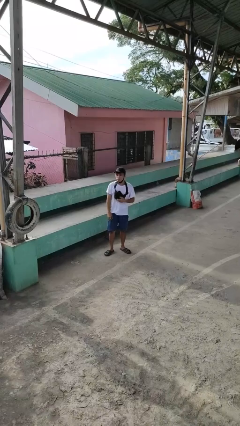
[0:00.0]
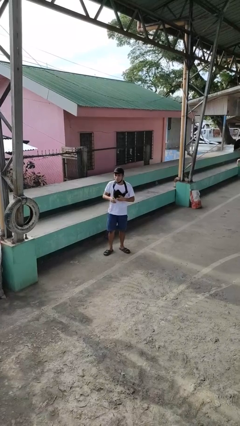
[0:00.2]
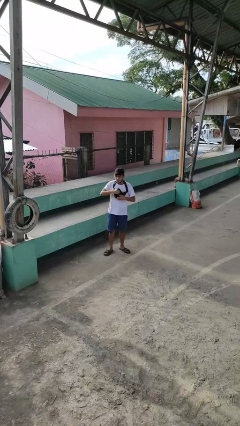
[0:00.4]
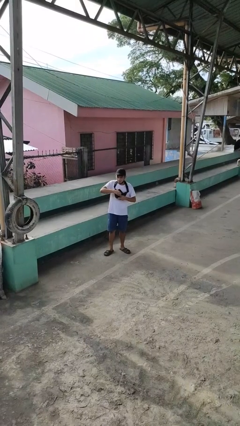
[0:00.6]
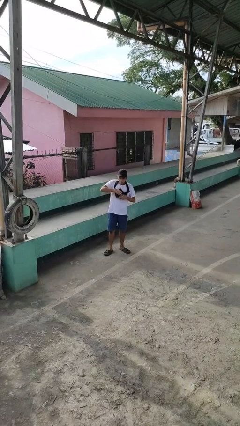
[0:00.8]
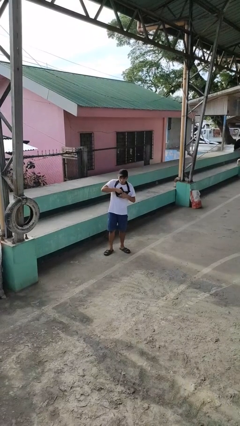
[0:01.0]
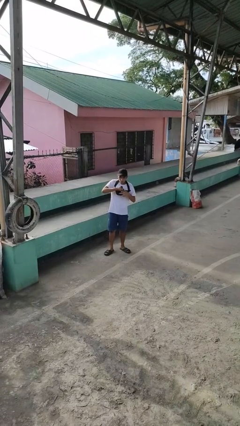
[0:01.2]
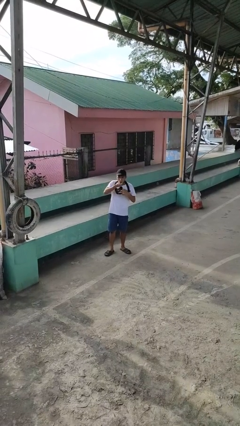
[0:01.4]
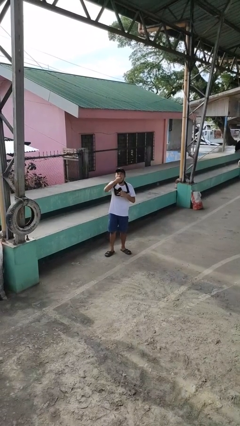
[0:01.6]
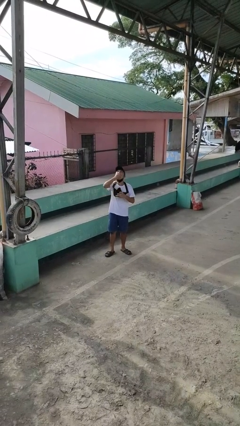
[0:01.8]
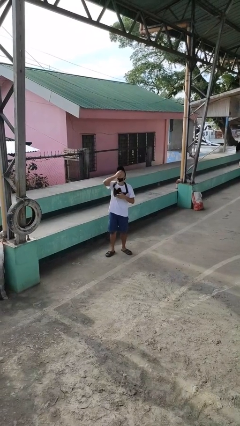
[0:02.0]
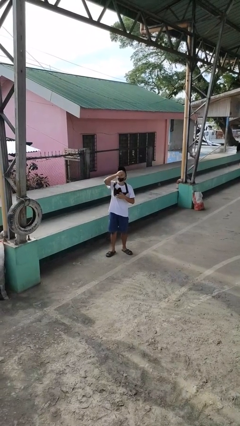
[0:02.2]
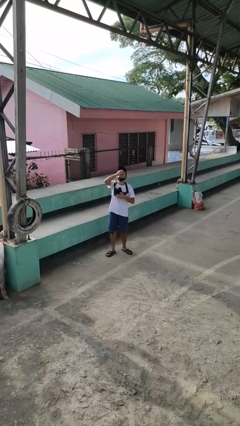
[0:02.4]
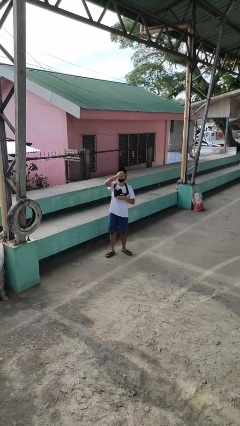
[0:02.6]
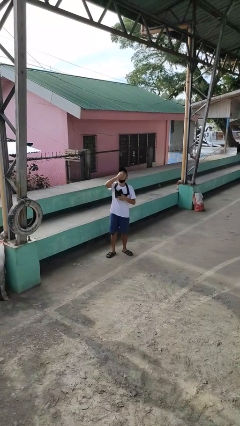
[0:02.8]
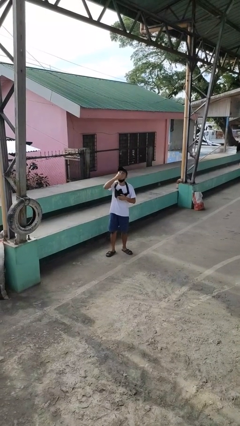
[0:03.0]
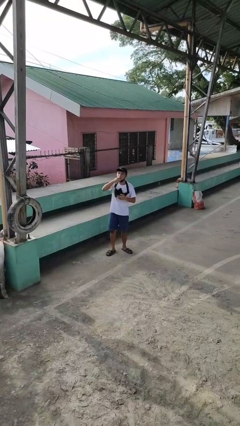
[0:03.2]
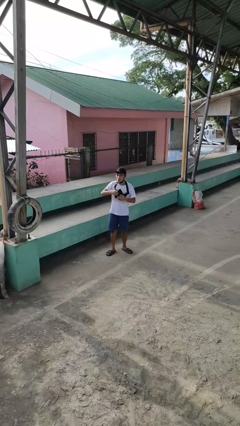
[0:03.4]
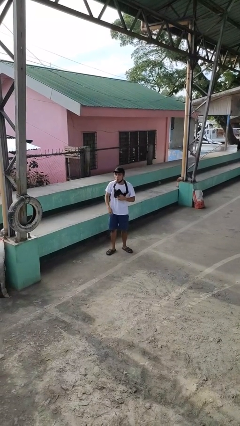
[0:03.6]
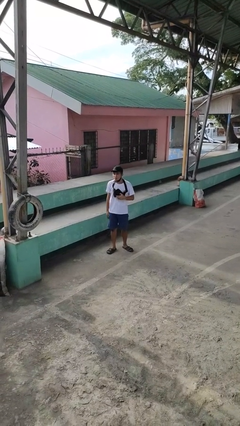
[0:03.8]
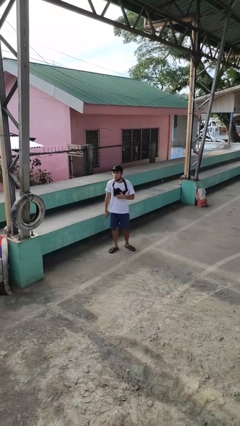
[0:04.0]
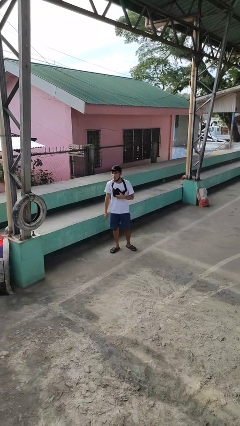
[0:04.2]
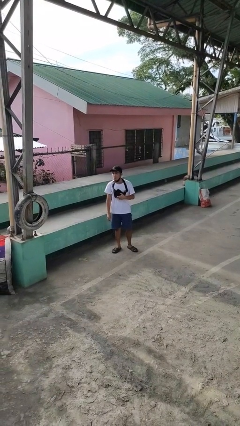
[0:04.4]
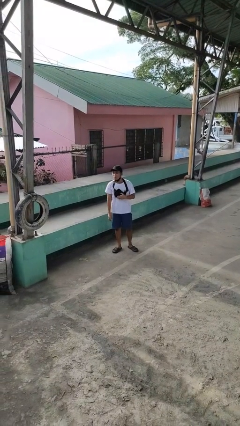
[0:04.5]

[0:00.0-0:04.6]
person eats snack from bag

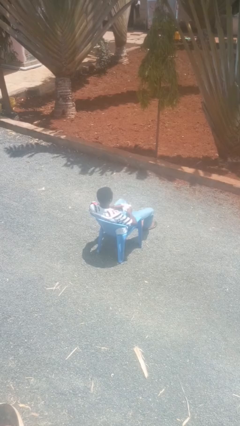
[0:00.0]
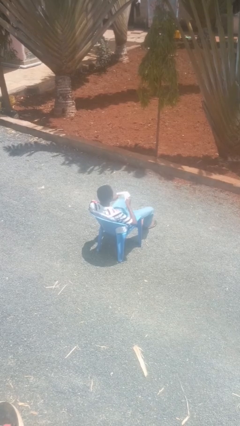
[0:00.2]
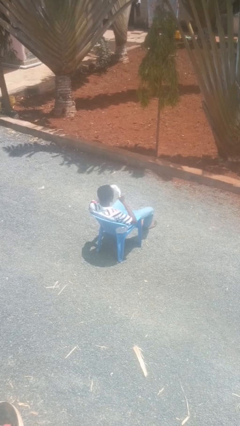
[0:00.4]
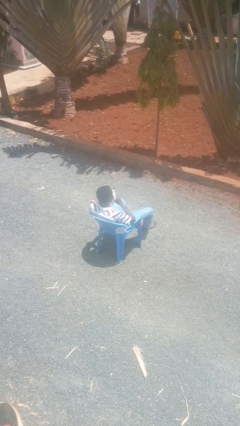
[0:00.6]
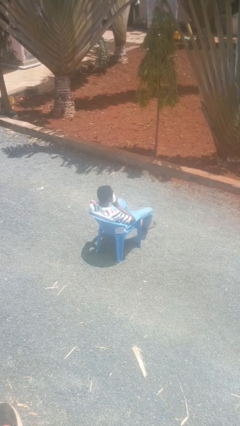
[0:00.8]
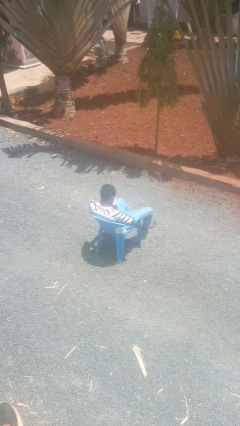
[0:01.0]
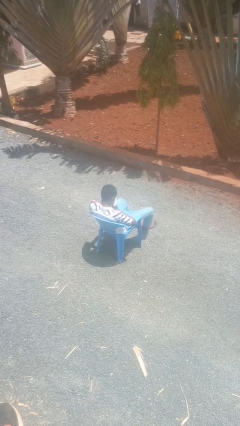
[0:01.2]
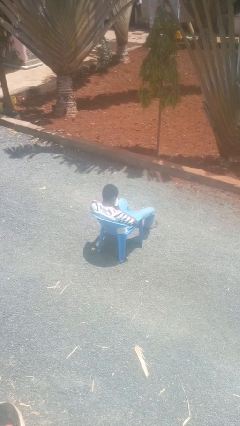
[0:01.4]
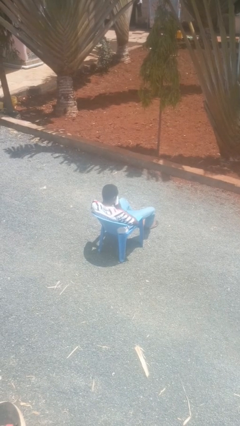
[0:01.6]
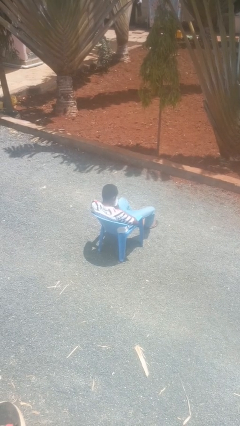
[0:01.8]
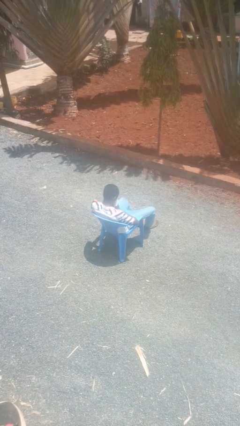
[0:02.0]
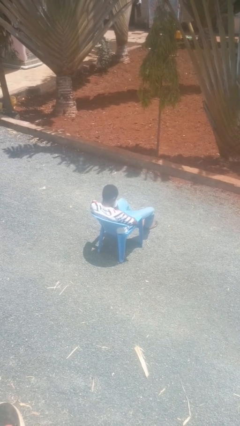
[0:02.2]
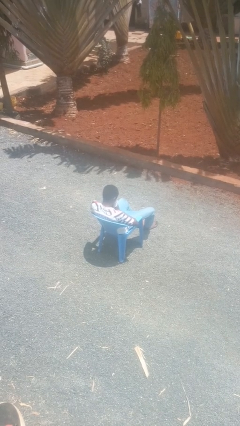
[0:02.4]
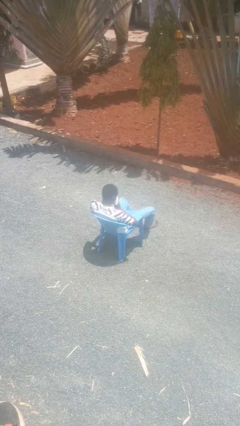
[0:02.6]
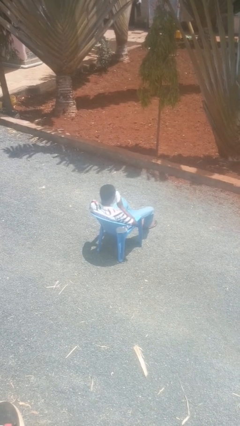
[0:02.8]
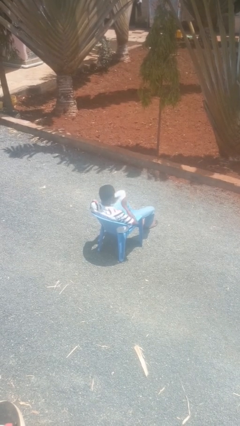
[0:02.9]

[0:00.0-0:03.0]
person blows nose

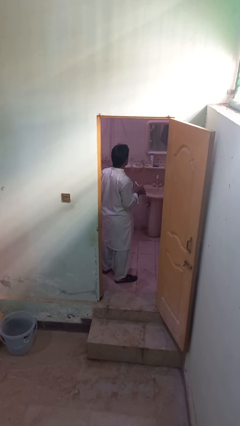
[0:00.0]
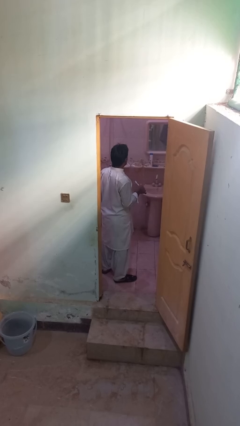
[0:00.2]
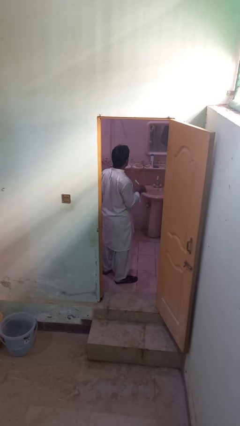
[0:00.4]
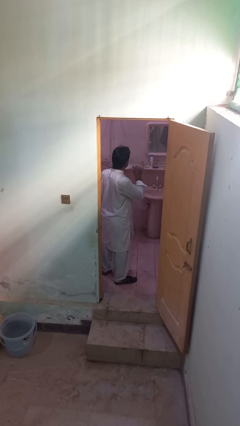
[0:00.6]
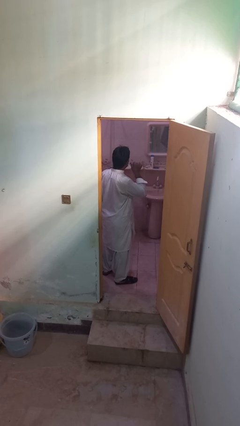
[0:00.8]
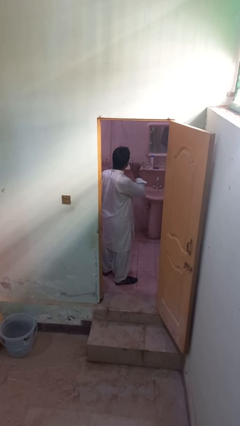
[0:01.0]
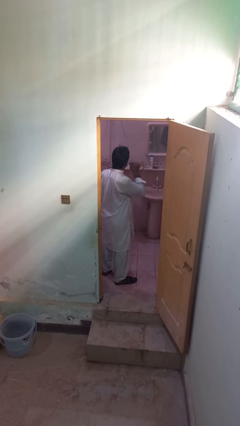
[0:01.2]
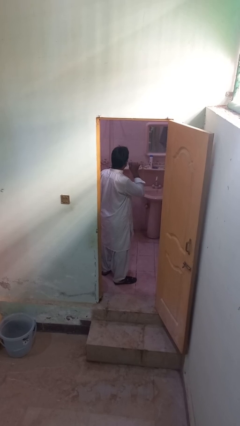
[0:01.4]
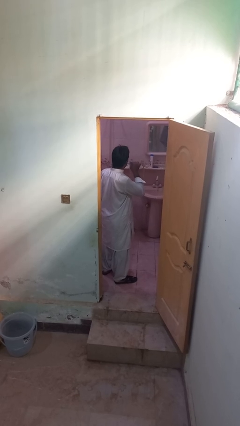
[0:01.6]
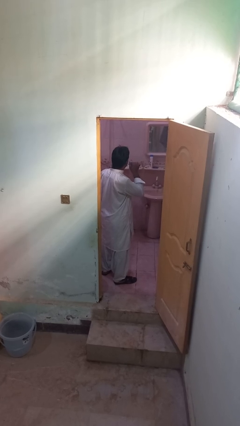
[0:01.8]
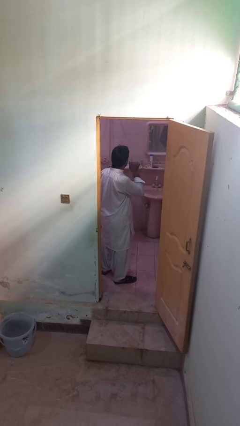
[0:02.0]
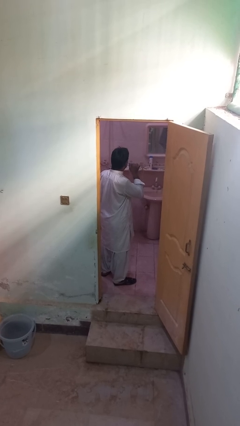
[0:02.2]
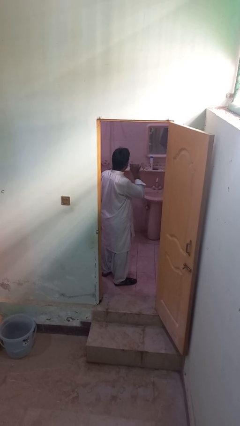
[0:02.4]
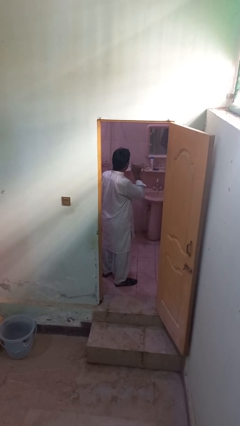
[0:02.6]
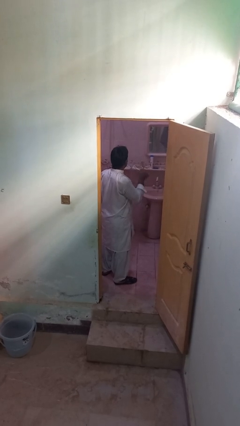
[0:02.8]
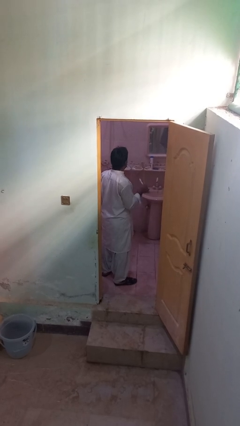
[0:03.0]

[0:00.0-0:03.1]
person brushes teeth

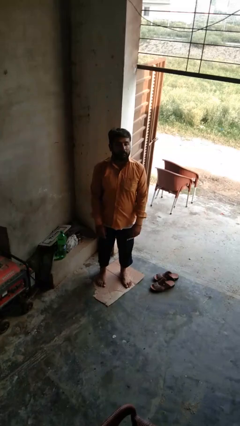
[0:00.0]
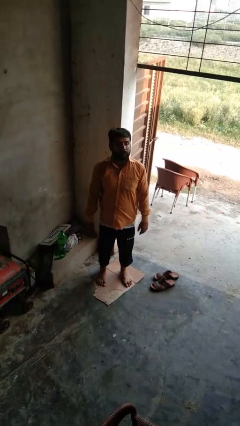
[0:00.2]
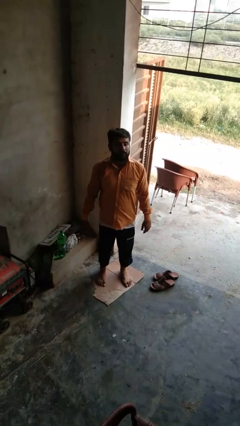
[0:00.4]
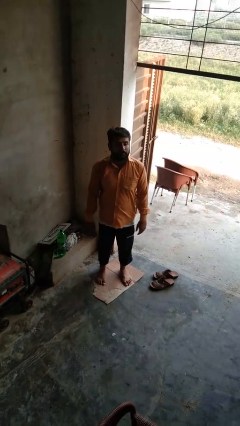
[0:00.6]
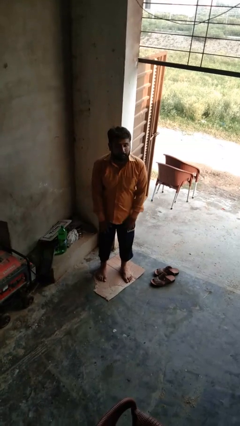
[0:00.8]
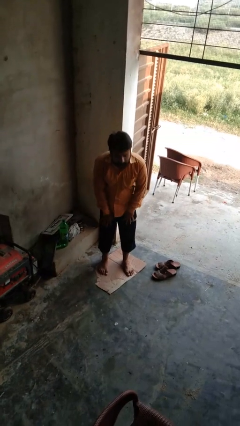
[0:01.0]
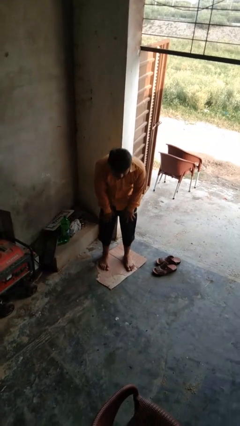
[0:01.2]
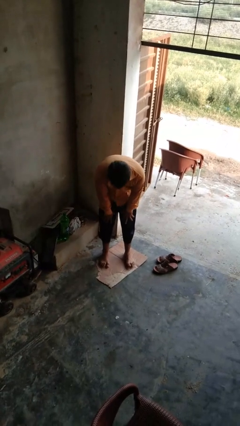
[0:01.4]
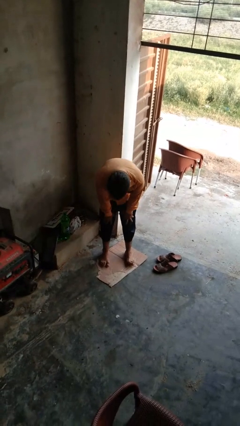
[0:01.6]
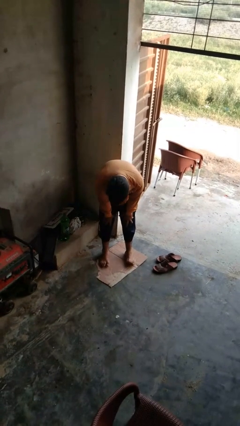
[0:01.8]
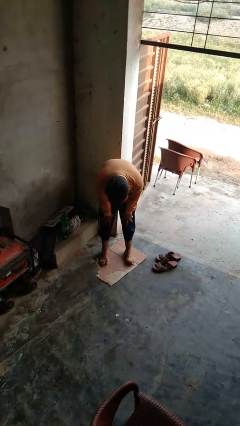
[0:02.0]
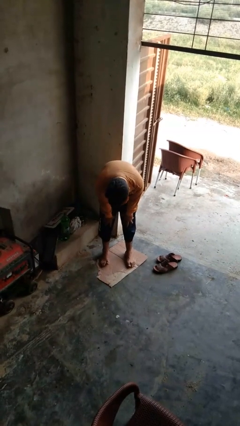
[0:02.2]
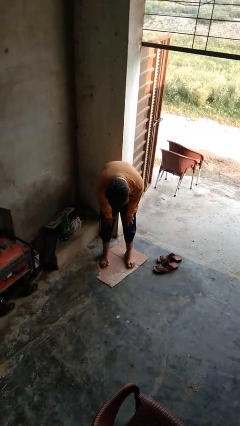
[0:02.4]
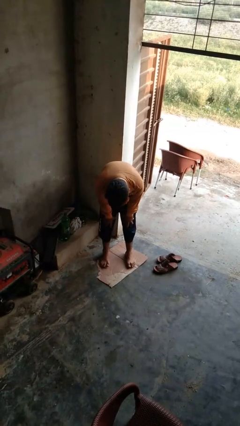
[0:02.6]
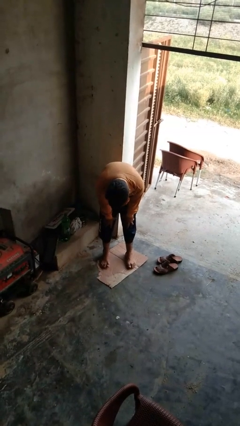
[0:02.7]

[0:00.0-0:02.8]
person bows

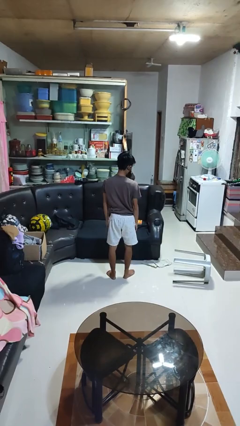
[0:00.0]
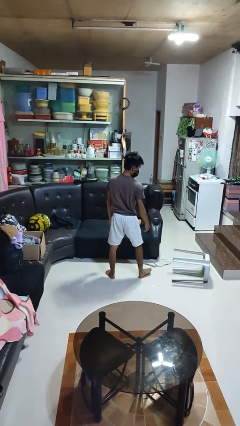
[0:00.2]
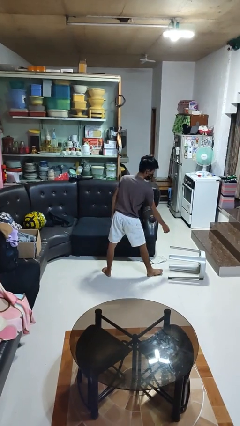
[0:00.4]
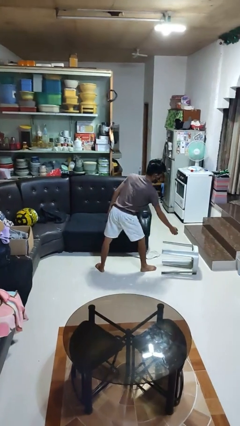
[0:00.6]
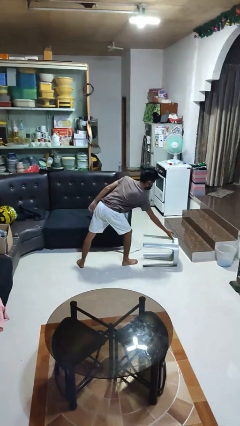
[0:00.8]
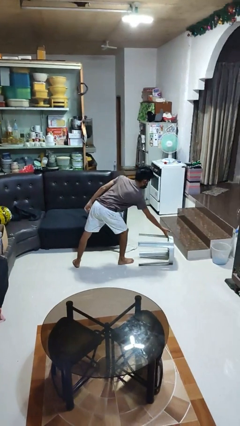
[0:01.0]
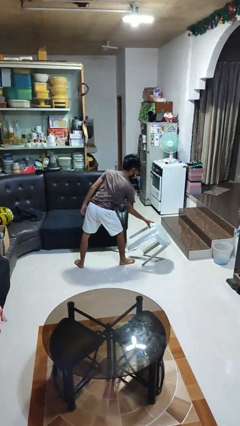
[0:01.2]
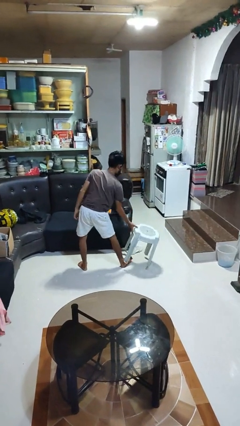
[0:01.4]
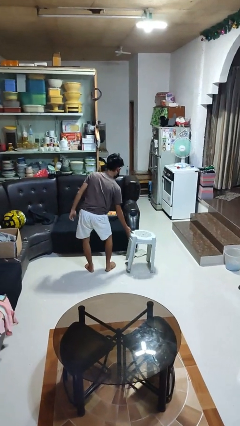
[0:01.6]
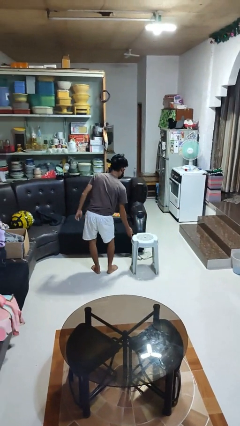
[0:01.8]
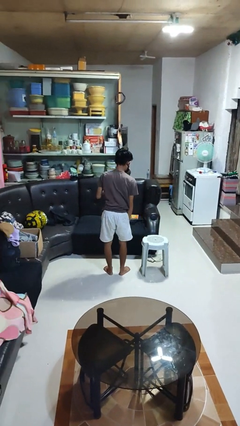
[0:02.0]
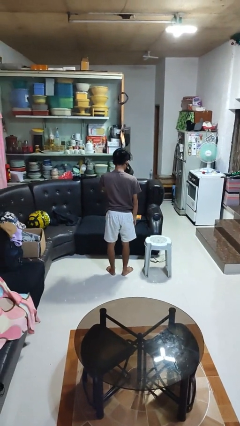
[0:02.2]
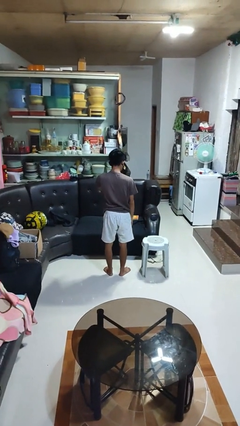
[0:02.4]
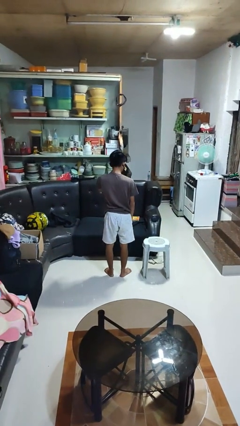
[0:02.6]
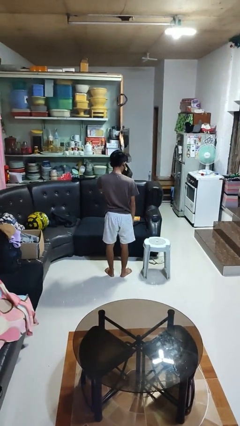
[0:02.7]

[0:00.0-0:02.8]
person sets upright furniture

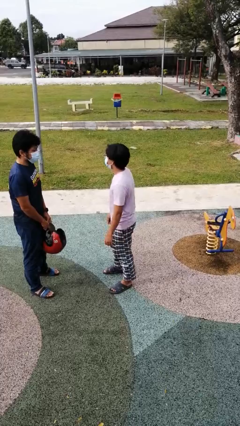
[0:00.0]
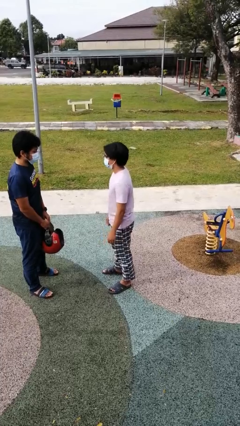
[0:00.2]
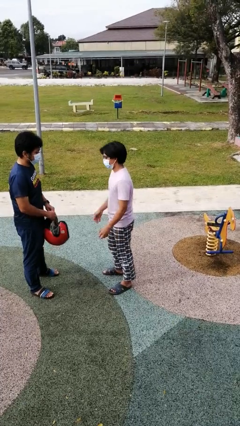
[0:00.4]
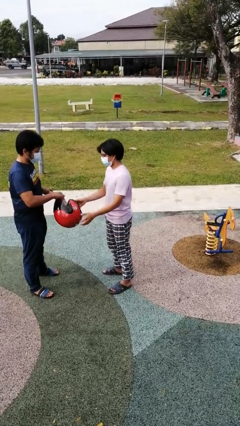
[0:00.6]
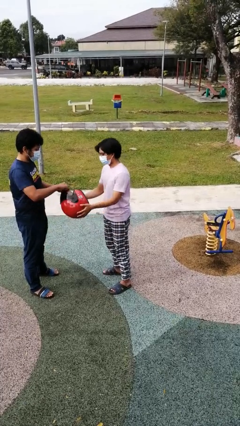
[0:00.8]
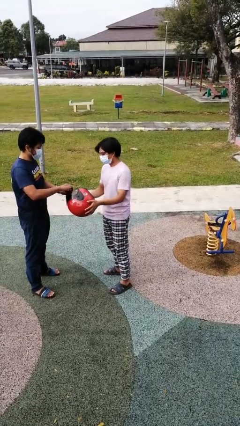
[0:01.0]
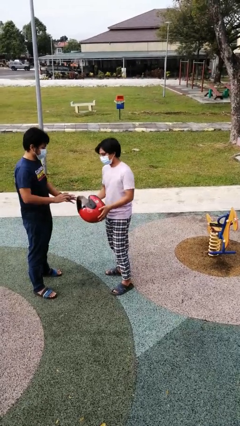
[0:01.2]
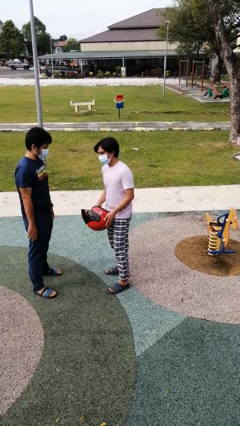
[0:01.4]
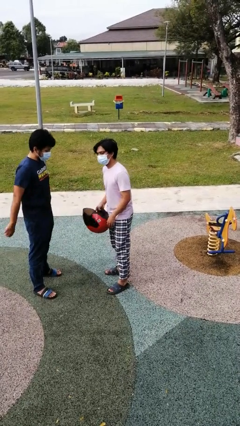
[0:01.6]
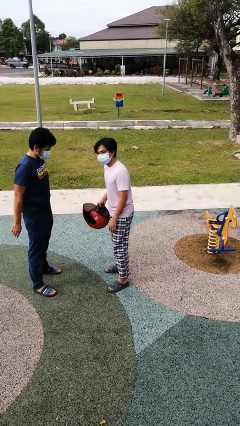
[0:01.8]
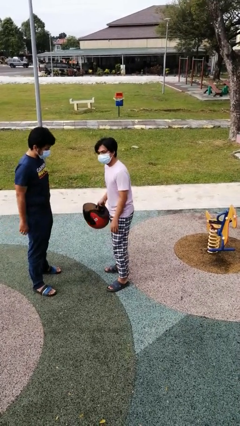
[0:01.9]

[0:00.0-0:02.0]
person transfers object to person
